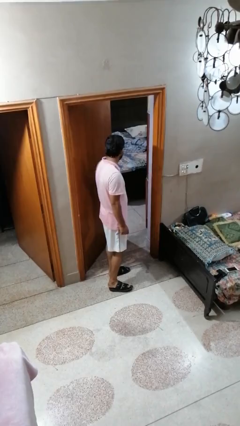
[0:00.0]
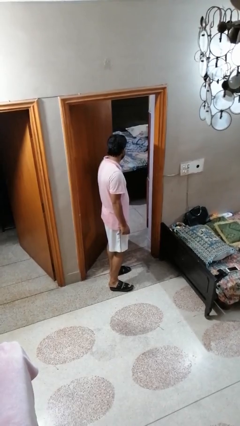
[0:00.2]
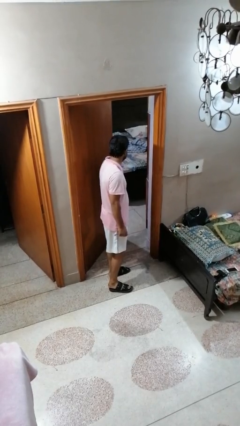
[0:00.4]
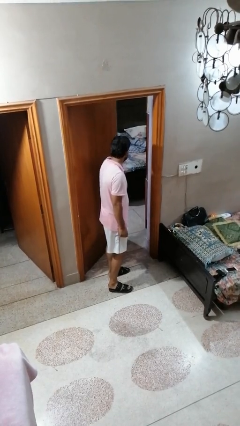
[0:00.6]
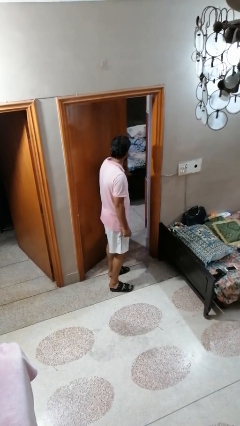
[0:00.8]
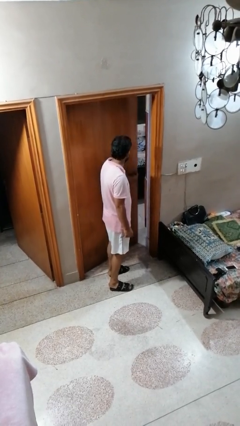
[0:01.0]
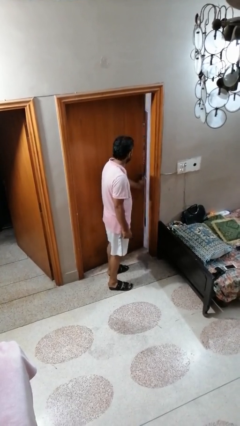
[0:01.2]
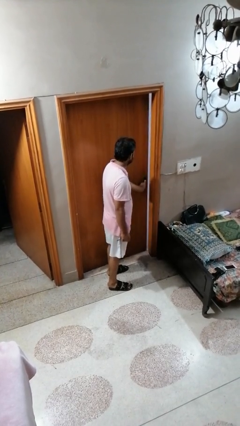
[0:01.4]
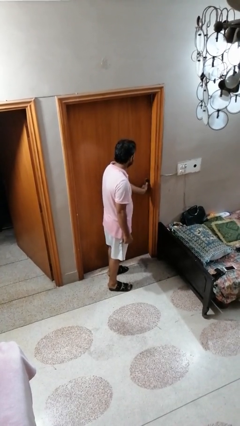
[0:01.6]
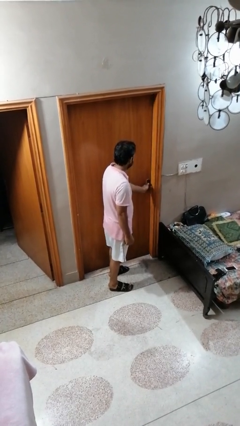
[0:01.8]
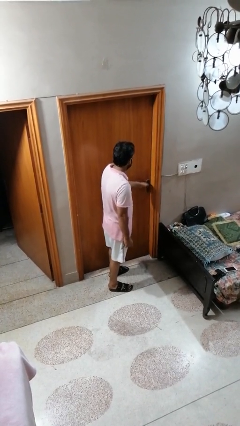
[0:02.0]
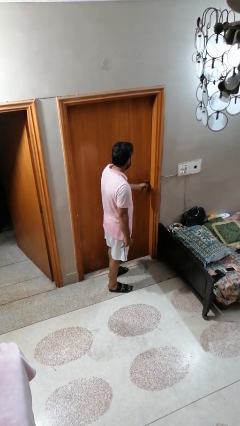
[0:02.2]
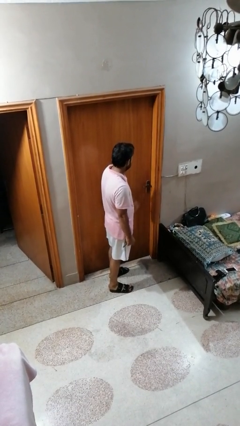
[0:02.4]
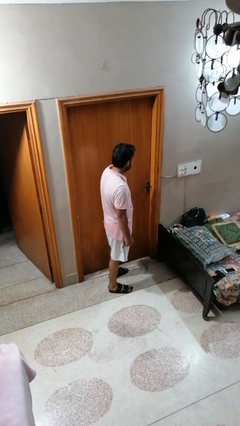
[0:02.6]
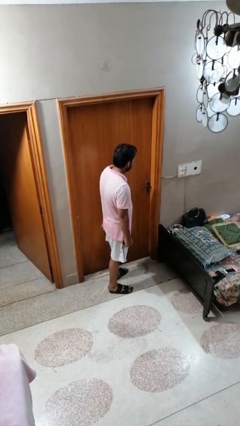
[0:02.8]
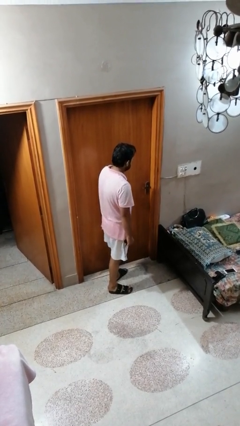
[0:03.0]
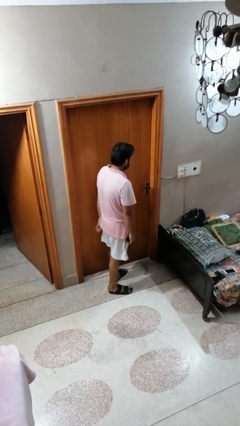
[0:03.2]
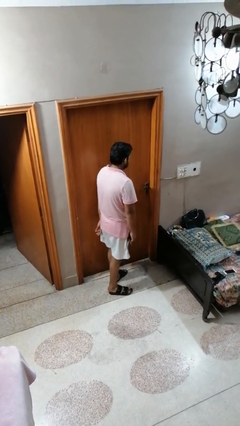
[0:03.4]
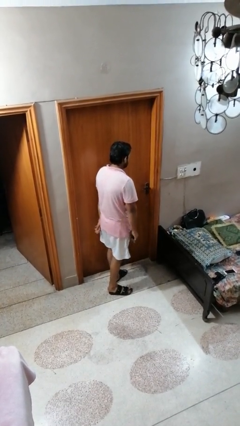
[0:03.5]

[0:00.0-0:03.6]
person closes facility door

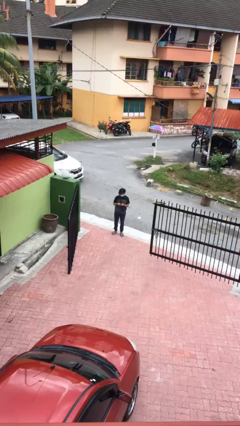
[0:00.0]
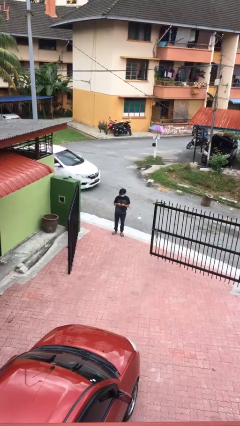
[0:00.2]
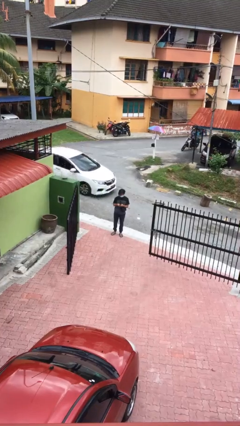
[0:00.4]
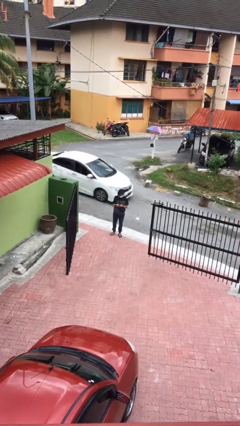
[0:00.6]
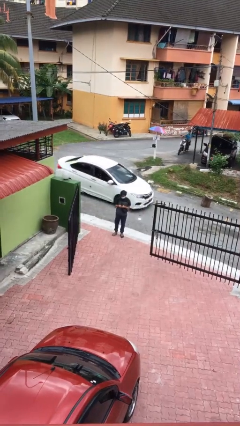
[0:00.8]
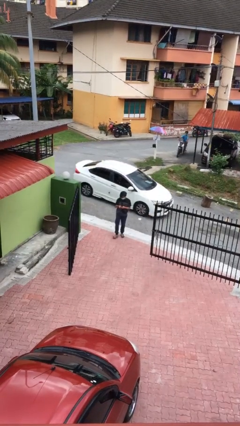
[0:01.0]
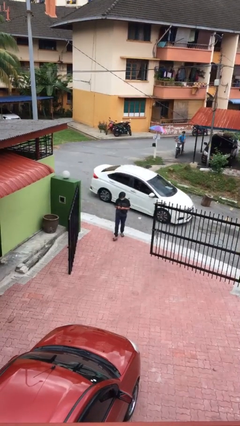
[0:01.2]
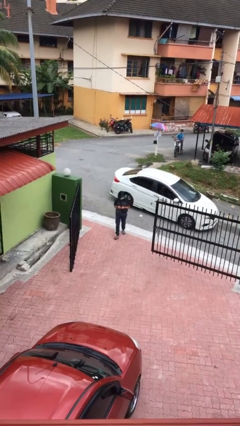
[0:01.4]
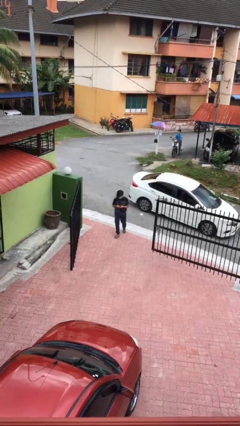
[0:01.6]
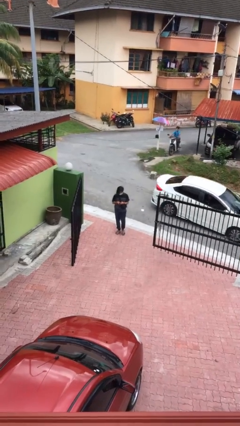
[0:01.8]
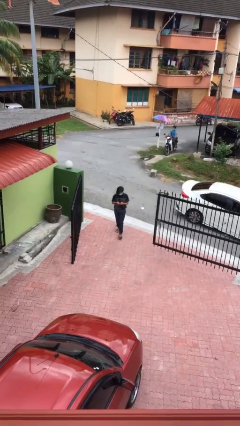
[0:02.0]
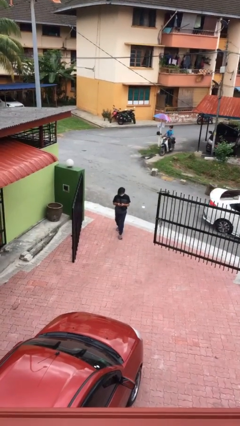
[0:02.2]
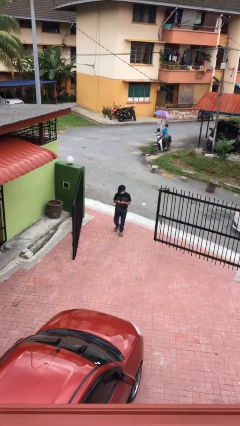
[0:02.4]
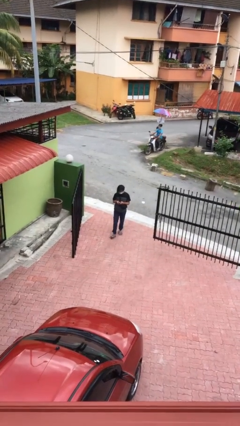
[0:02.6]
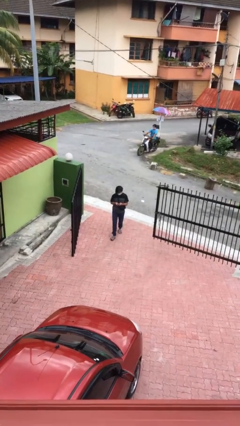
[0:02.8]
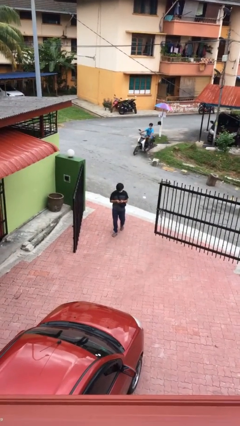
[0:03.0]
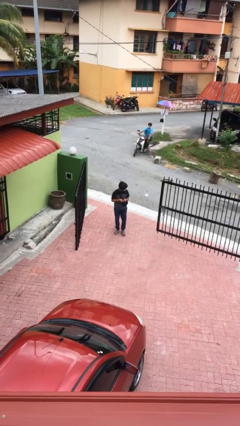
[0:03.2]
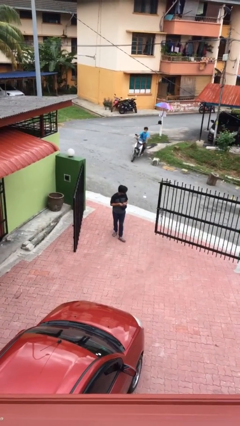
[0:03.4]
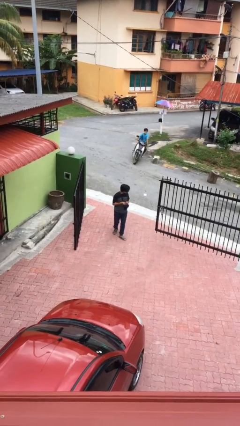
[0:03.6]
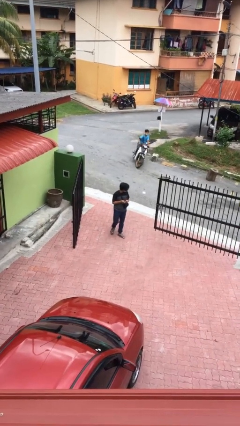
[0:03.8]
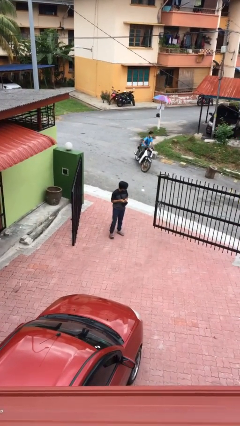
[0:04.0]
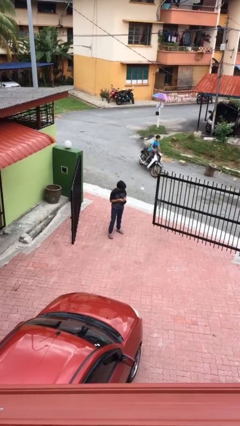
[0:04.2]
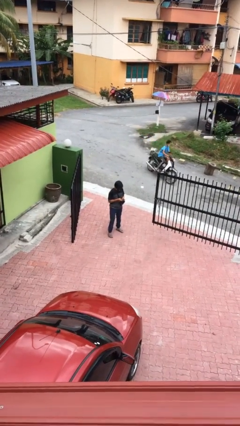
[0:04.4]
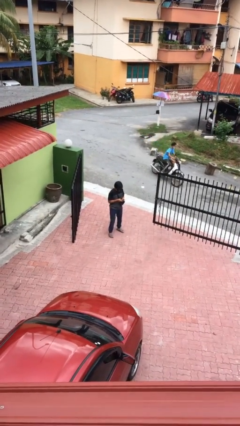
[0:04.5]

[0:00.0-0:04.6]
person enters scene through structure

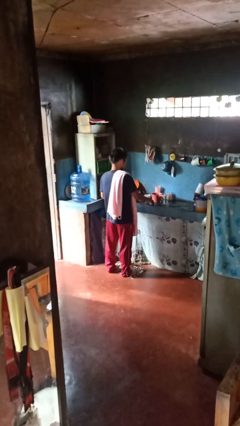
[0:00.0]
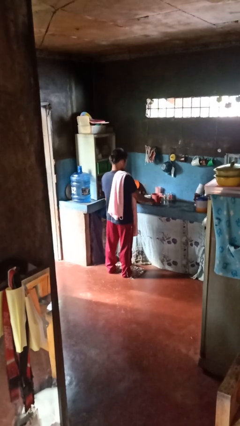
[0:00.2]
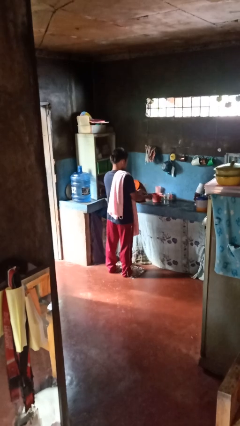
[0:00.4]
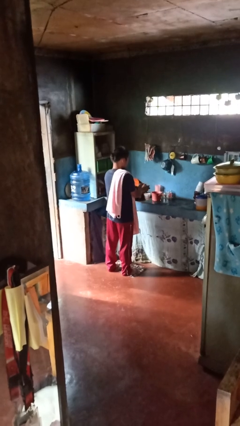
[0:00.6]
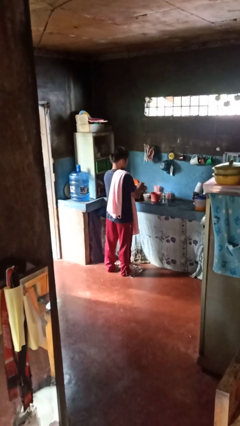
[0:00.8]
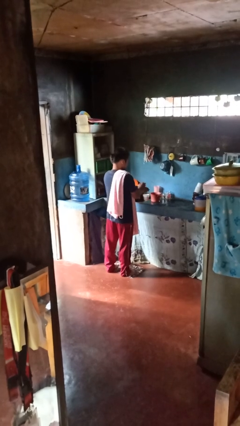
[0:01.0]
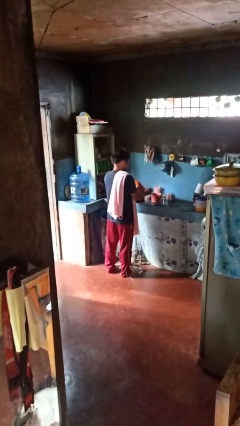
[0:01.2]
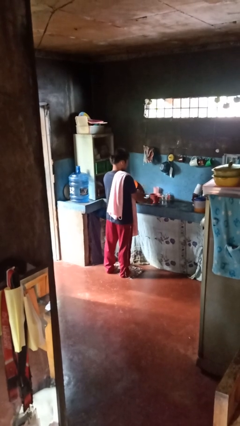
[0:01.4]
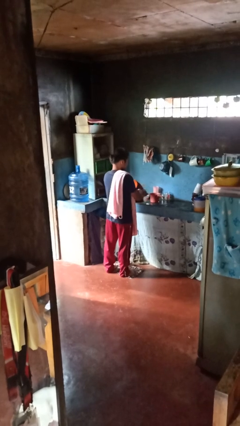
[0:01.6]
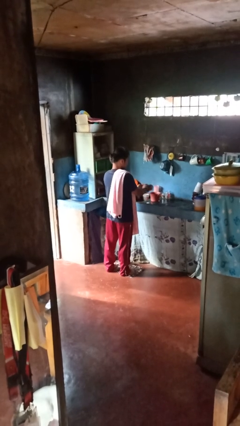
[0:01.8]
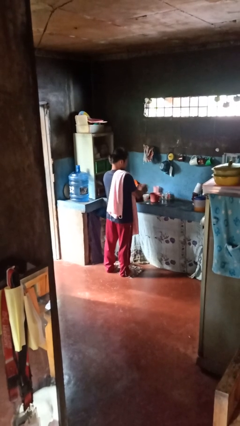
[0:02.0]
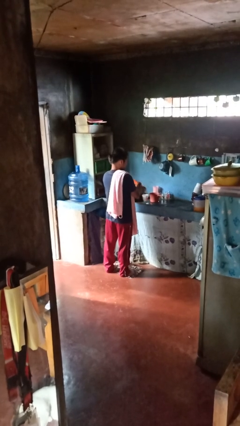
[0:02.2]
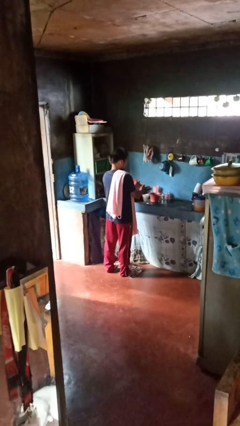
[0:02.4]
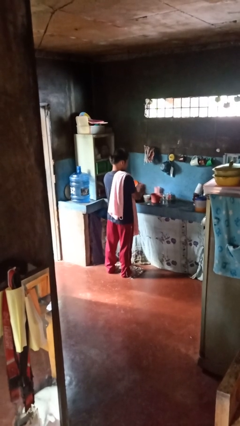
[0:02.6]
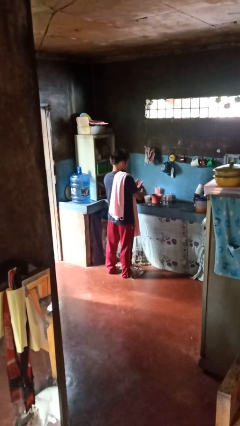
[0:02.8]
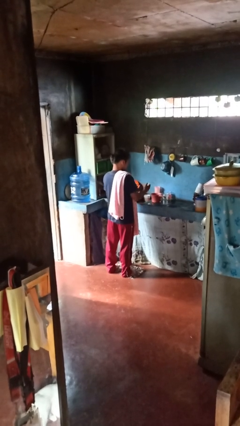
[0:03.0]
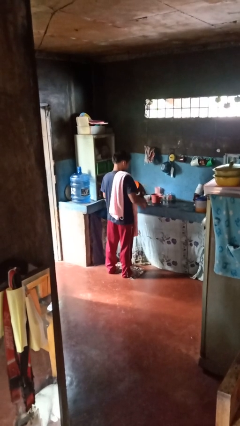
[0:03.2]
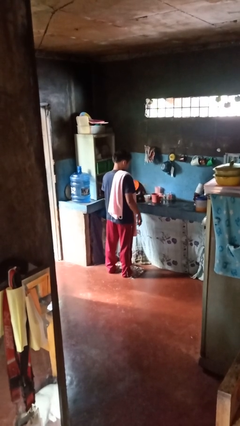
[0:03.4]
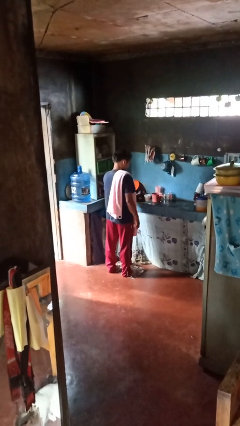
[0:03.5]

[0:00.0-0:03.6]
person washes hands

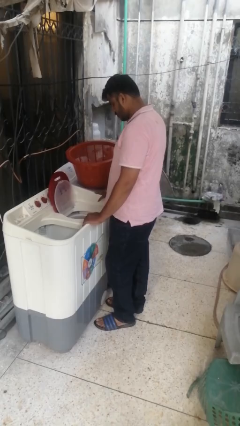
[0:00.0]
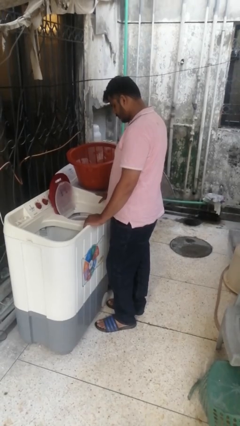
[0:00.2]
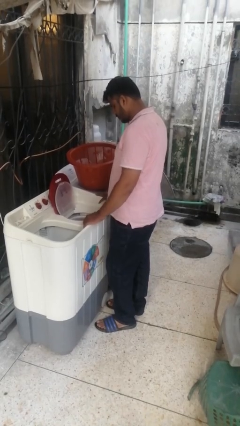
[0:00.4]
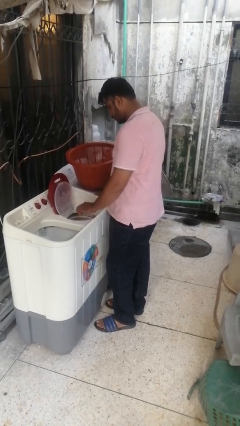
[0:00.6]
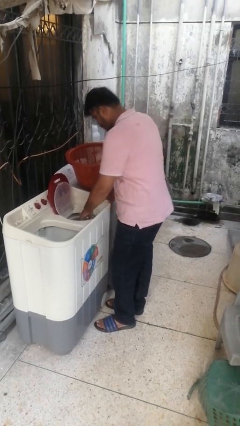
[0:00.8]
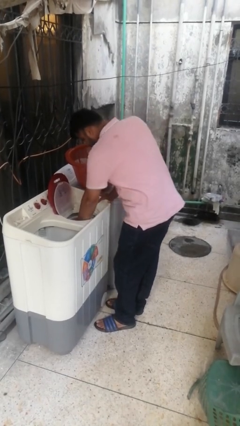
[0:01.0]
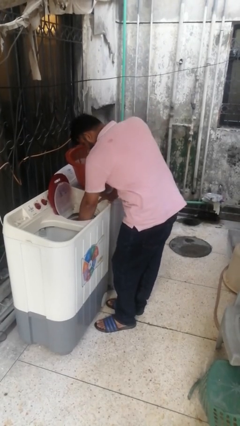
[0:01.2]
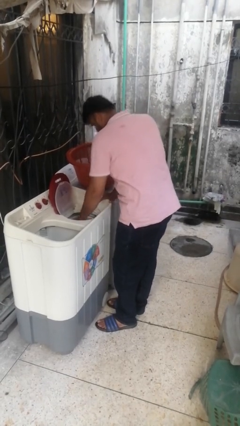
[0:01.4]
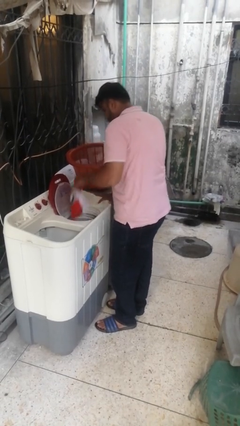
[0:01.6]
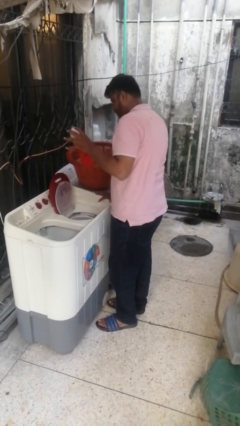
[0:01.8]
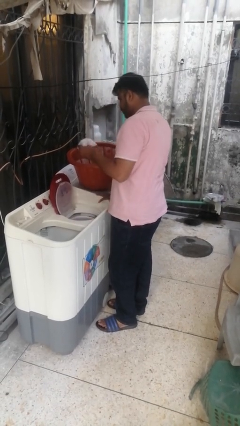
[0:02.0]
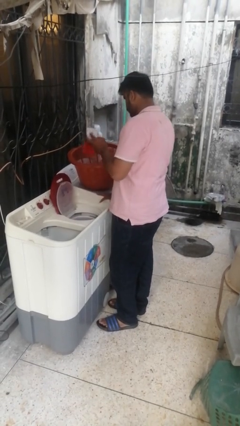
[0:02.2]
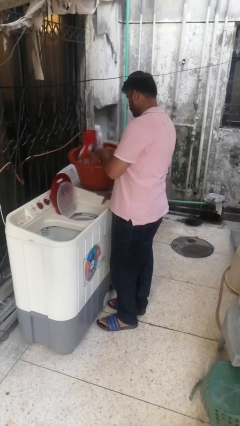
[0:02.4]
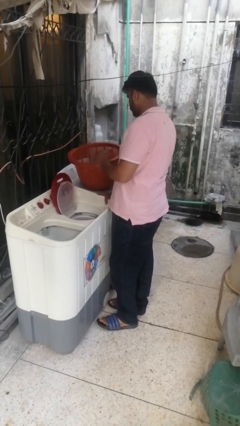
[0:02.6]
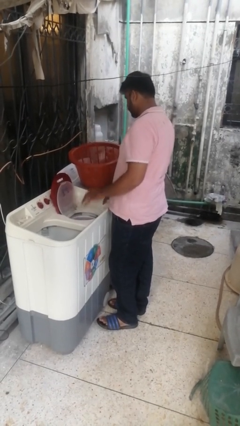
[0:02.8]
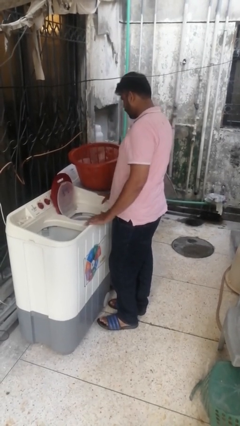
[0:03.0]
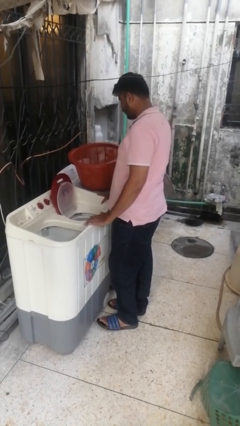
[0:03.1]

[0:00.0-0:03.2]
person unloads dryer

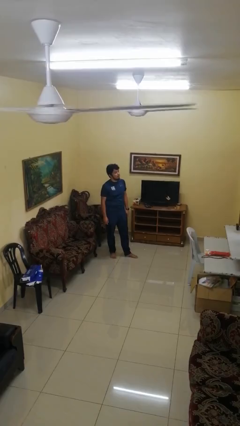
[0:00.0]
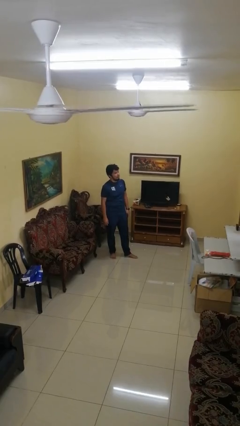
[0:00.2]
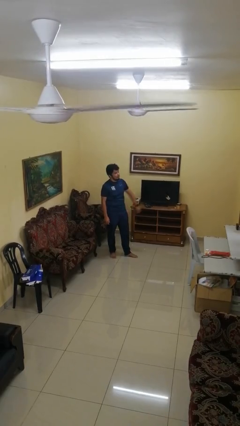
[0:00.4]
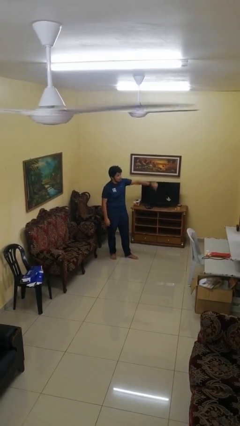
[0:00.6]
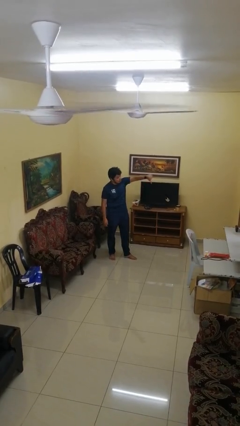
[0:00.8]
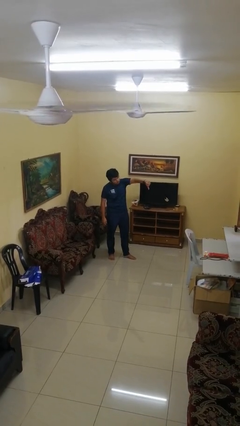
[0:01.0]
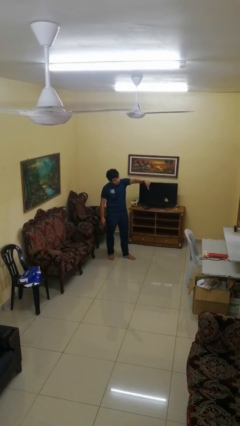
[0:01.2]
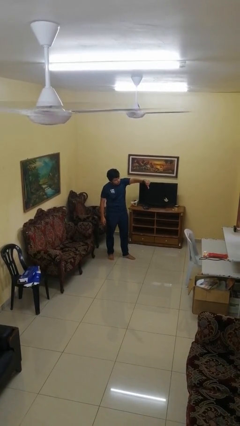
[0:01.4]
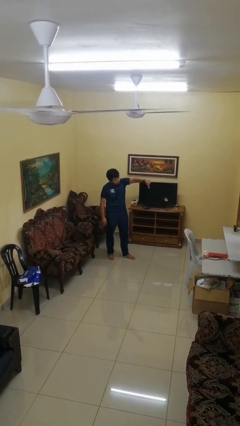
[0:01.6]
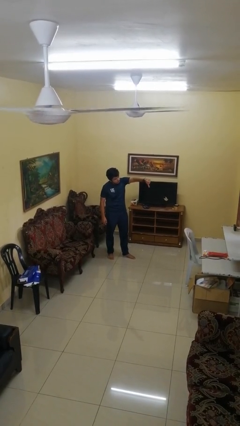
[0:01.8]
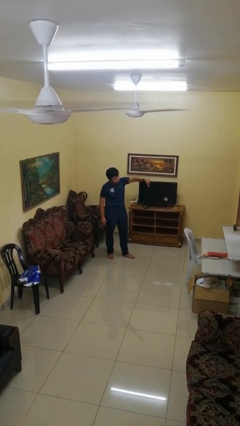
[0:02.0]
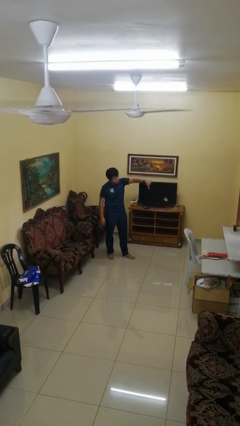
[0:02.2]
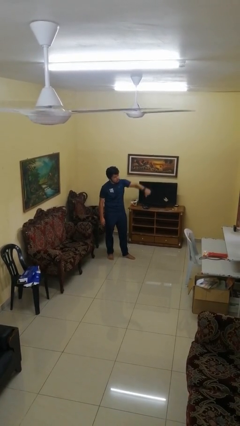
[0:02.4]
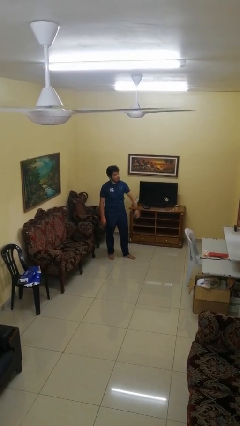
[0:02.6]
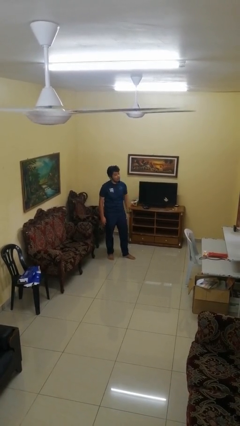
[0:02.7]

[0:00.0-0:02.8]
person gestures thumbs down
